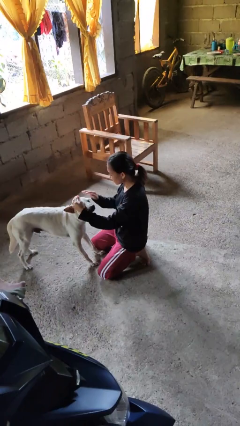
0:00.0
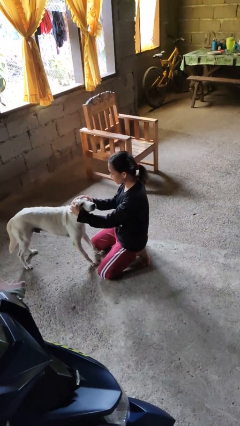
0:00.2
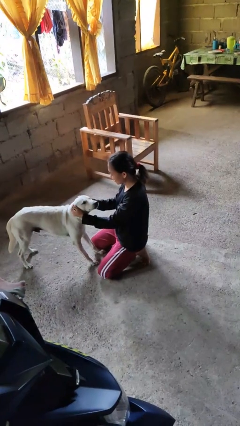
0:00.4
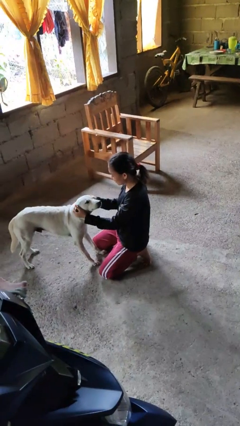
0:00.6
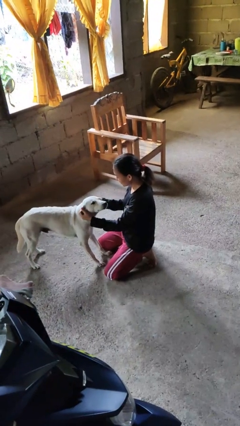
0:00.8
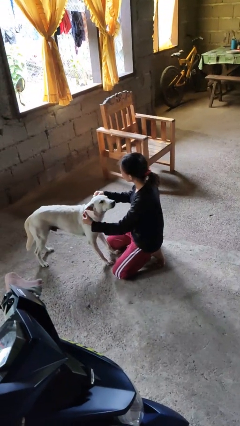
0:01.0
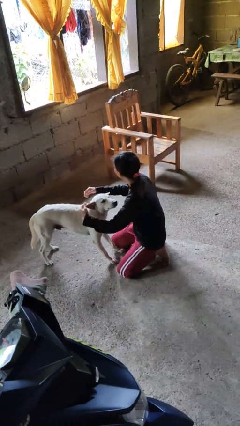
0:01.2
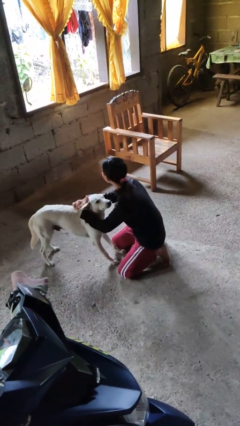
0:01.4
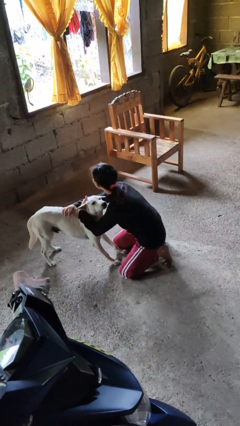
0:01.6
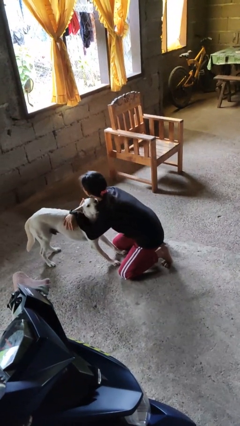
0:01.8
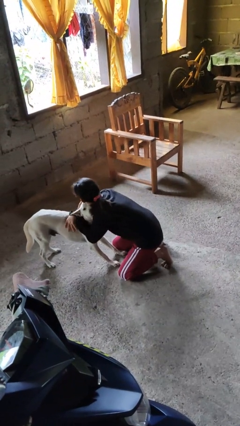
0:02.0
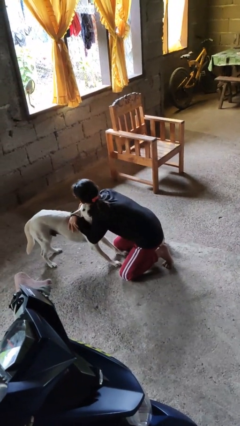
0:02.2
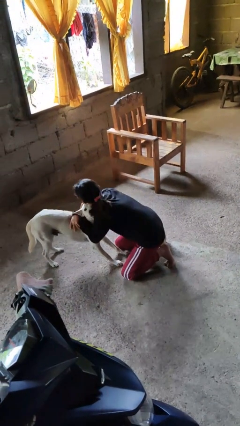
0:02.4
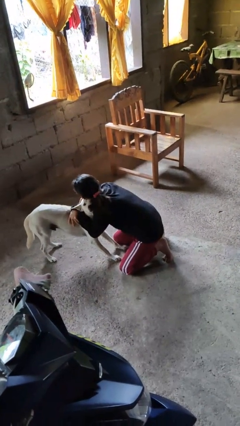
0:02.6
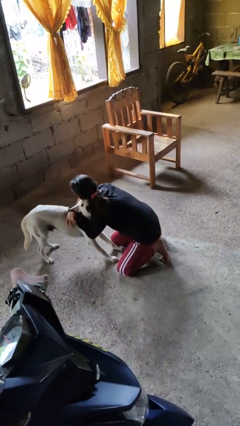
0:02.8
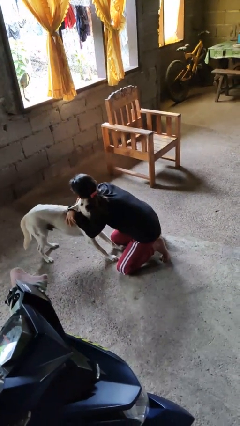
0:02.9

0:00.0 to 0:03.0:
person hugs dog

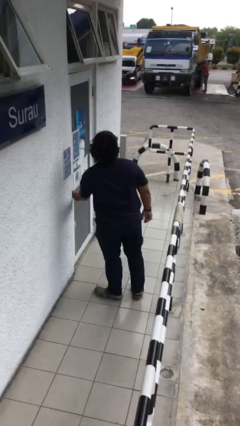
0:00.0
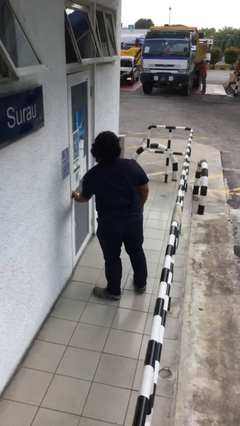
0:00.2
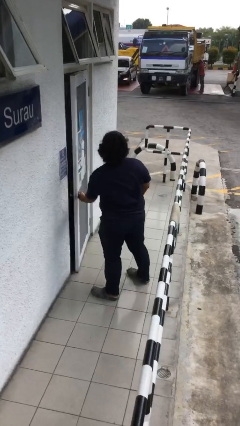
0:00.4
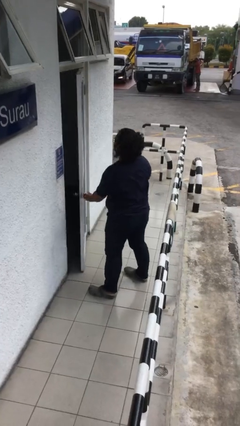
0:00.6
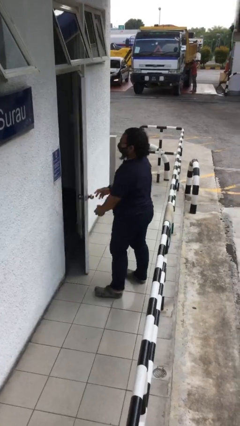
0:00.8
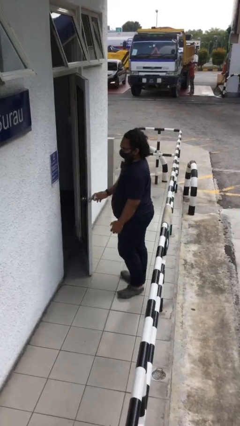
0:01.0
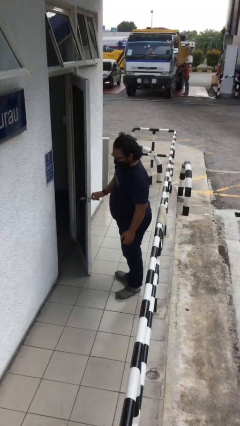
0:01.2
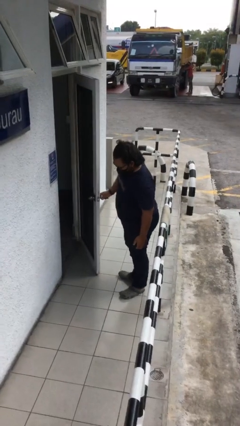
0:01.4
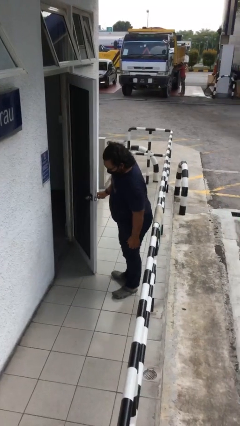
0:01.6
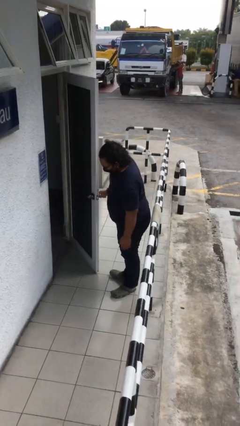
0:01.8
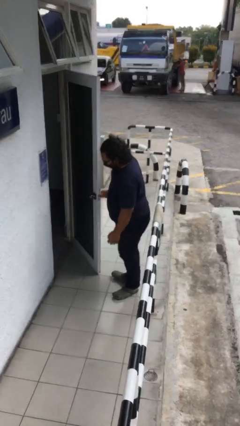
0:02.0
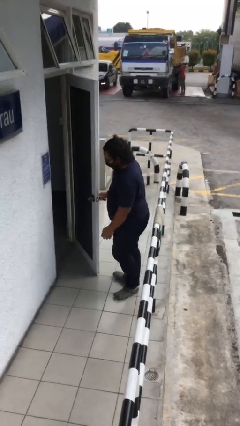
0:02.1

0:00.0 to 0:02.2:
person opens facility door

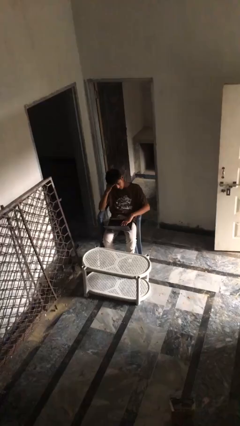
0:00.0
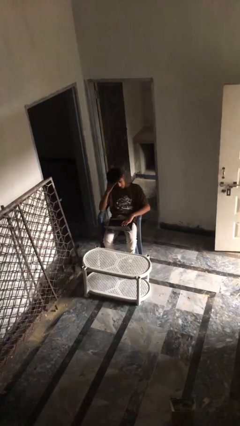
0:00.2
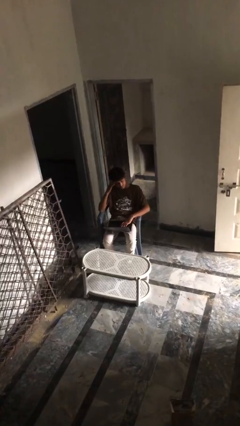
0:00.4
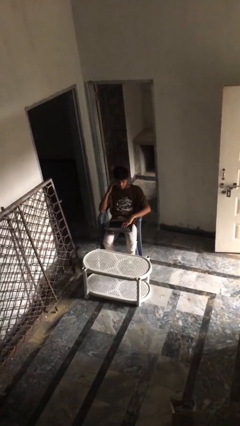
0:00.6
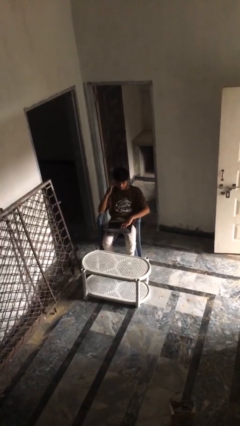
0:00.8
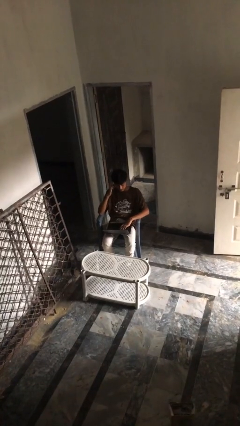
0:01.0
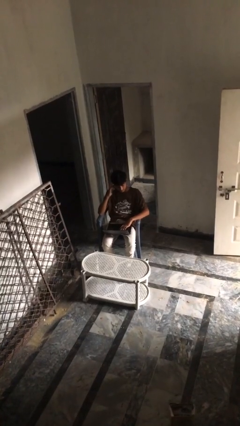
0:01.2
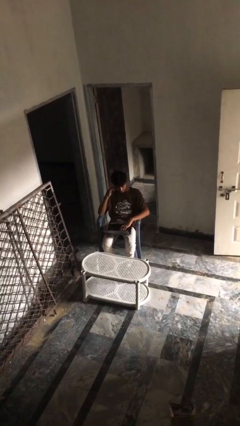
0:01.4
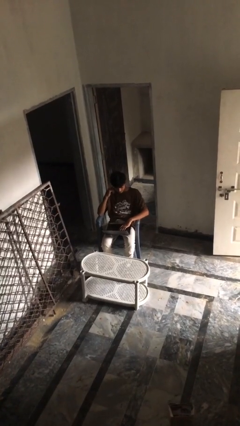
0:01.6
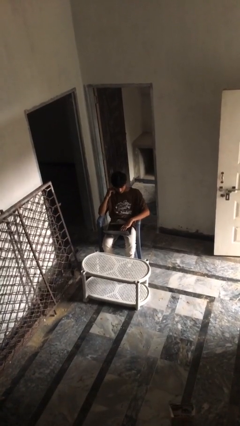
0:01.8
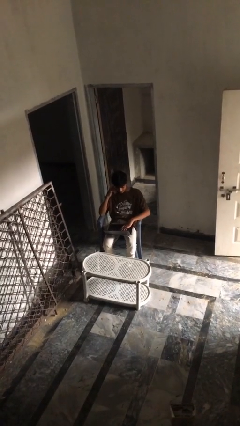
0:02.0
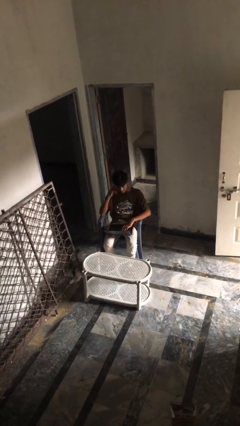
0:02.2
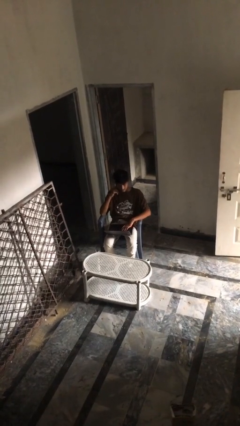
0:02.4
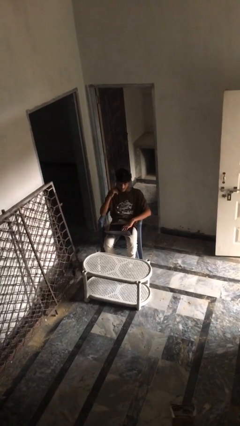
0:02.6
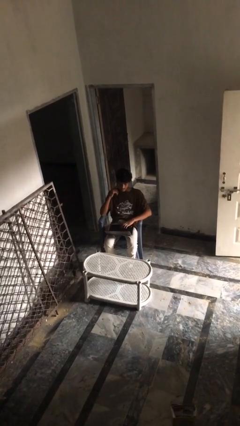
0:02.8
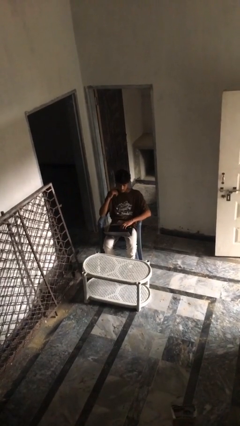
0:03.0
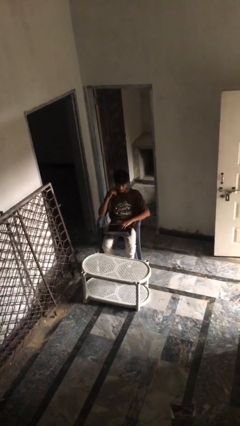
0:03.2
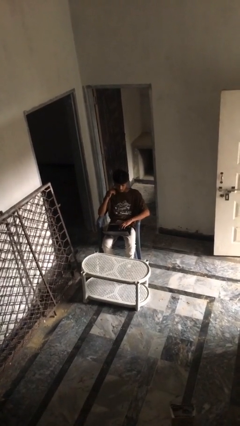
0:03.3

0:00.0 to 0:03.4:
person interacts with laptop

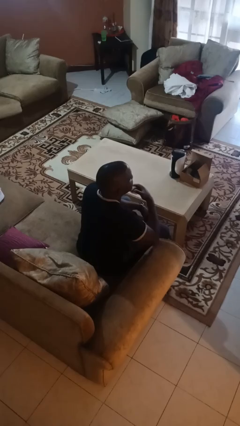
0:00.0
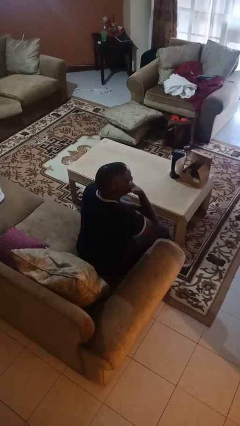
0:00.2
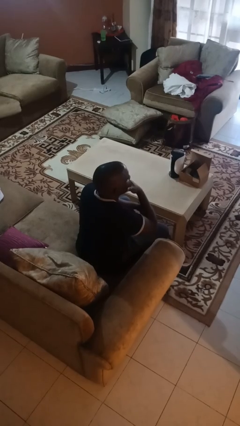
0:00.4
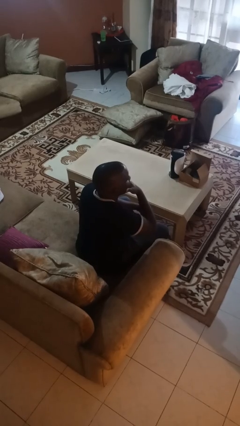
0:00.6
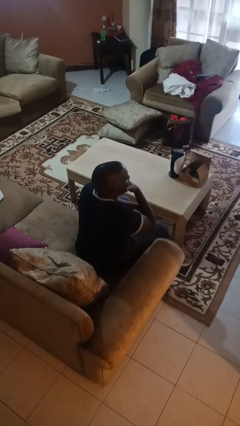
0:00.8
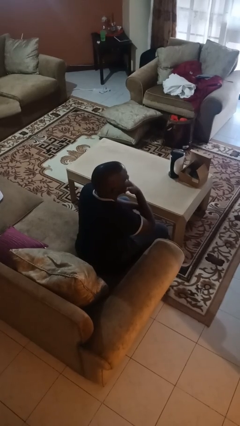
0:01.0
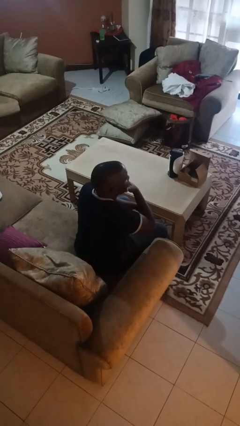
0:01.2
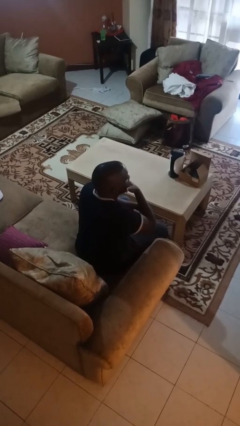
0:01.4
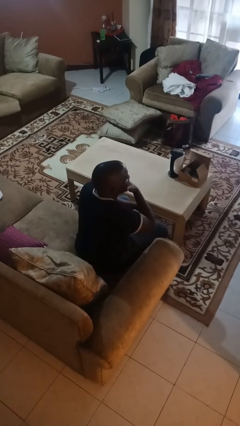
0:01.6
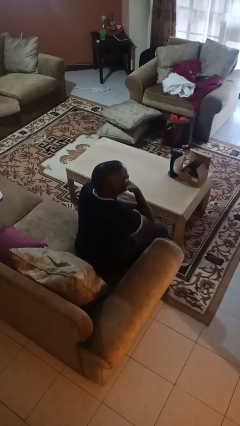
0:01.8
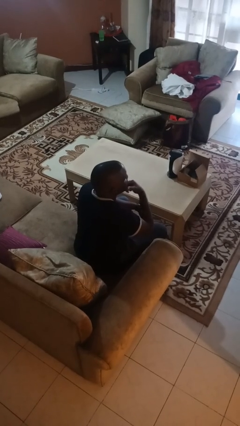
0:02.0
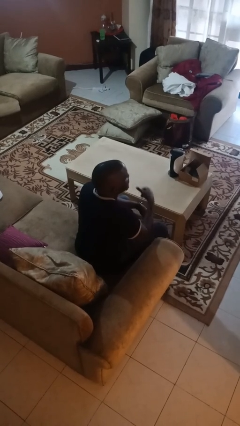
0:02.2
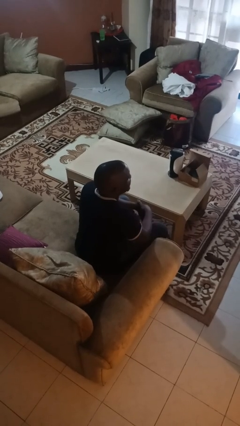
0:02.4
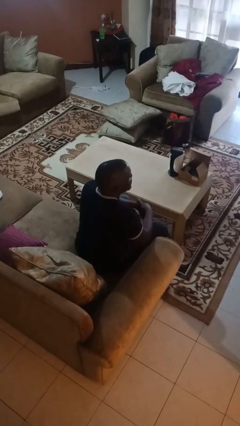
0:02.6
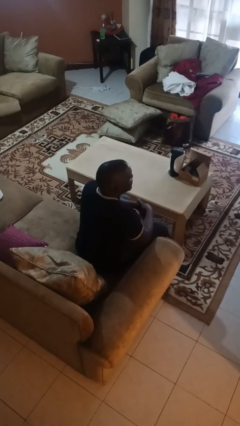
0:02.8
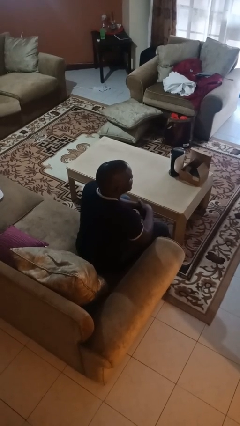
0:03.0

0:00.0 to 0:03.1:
person strokes chin

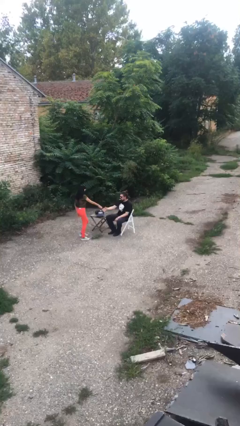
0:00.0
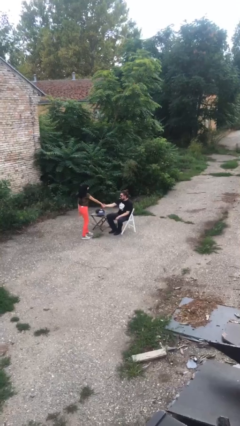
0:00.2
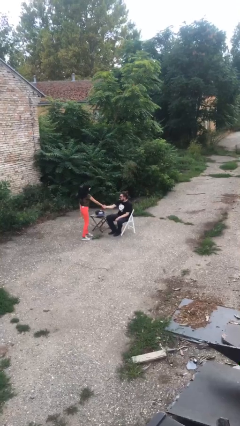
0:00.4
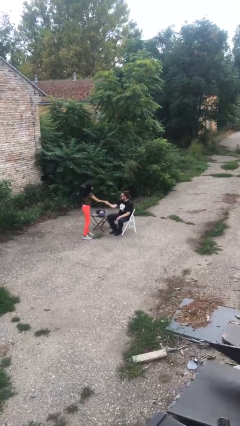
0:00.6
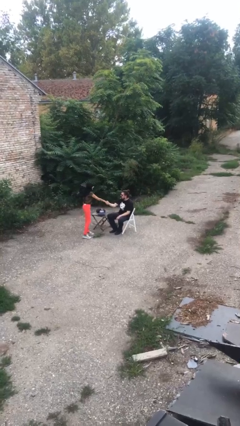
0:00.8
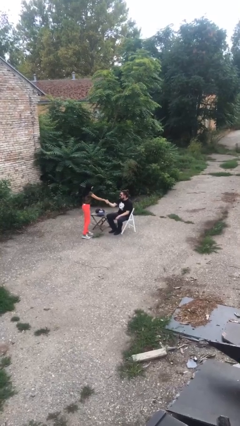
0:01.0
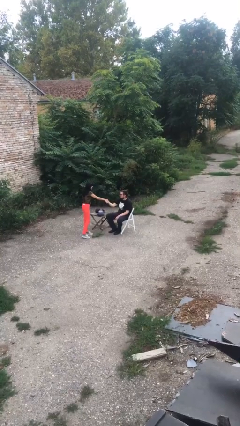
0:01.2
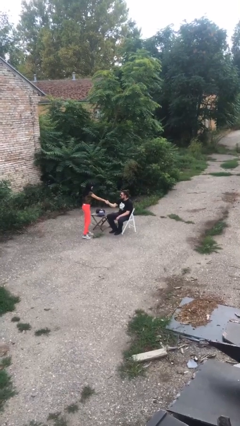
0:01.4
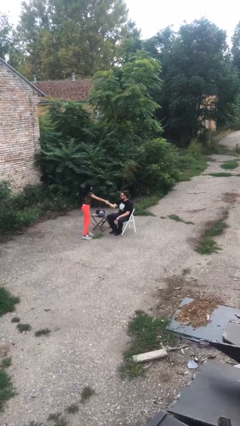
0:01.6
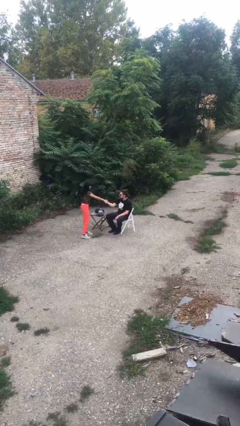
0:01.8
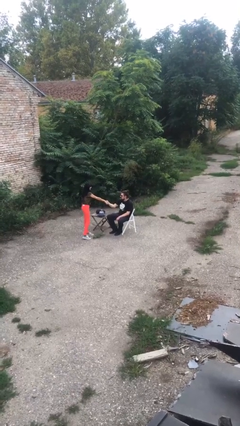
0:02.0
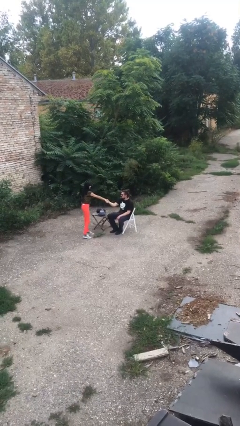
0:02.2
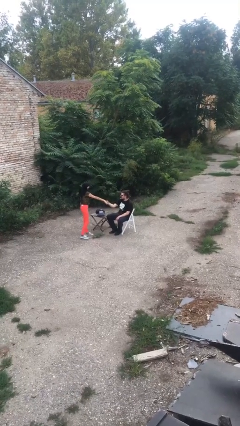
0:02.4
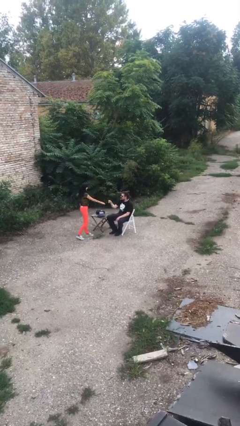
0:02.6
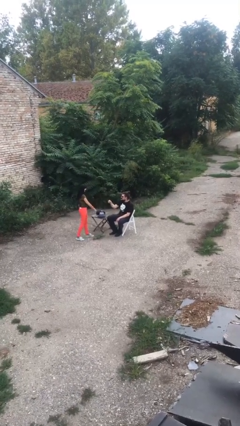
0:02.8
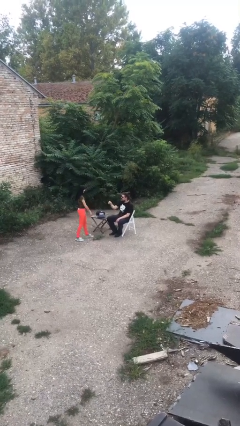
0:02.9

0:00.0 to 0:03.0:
person shakes hand

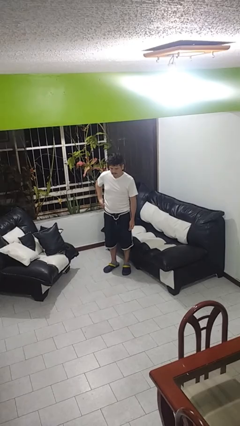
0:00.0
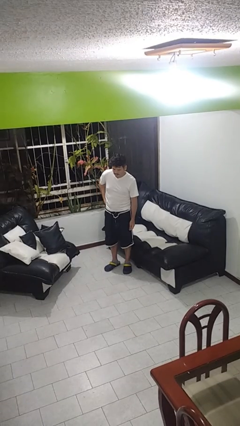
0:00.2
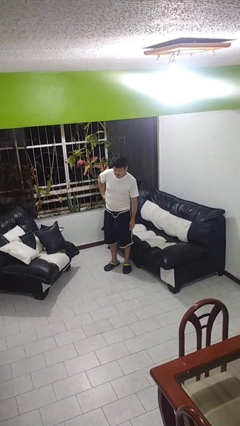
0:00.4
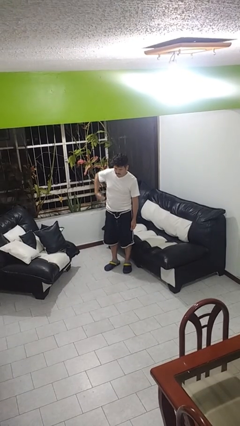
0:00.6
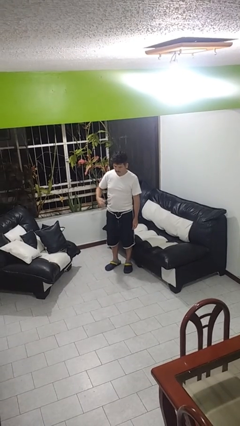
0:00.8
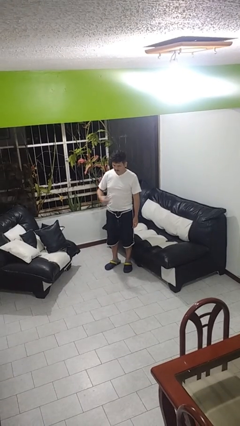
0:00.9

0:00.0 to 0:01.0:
person takes phone from pocket

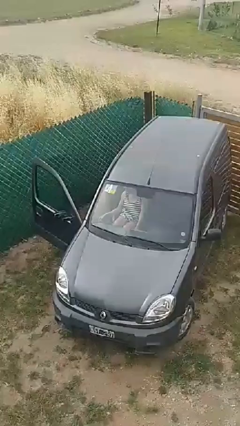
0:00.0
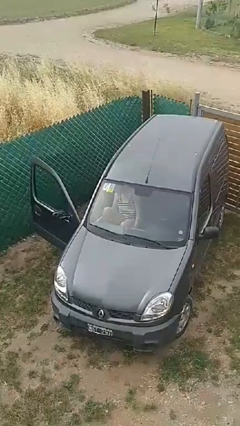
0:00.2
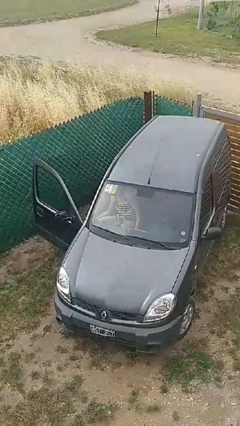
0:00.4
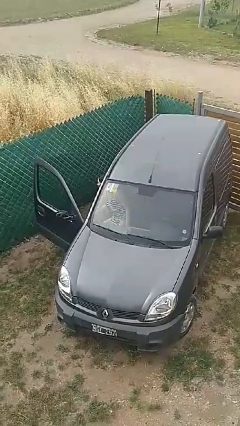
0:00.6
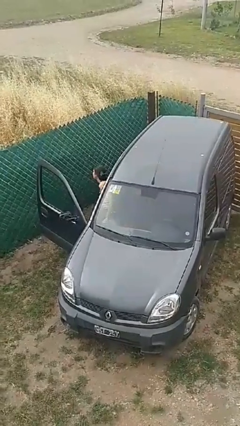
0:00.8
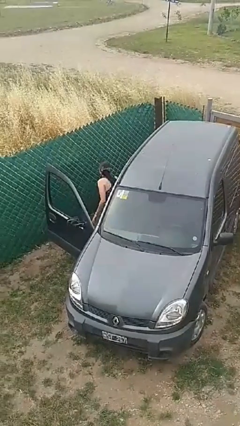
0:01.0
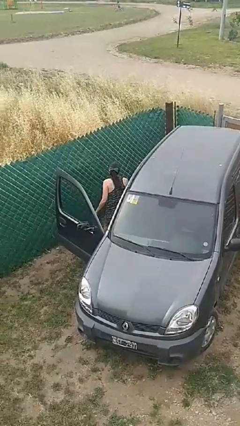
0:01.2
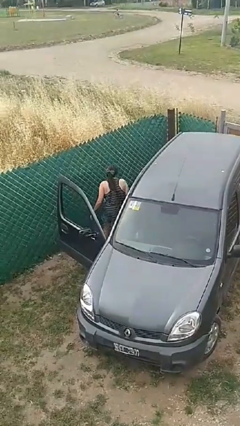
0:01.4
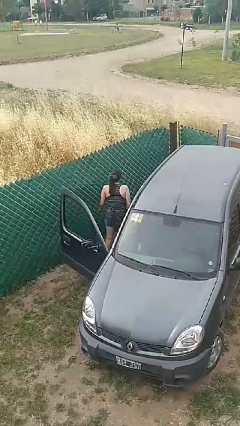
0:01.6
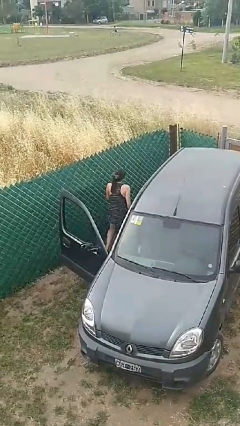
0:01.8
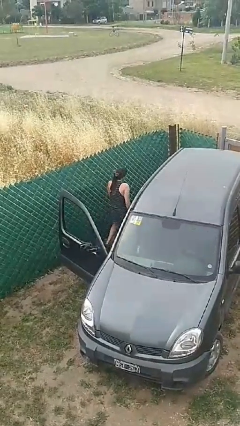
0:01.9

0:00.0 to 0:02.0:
person exits car
